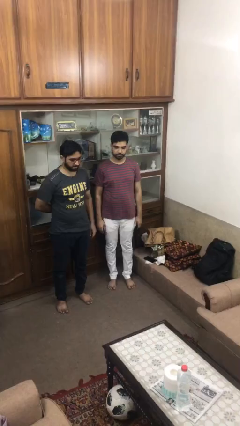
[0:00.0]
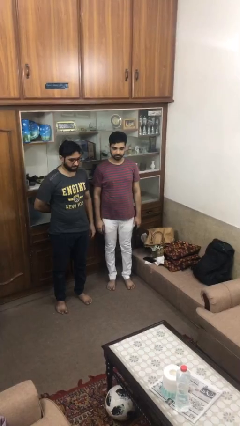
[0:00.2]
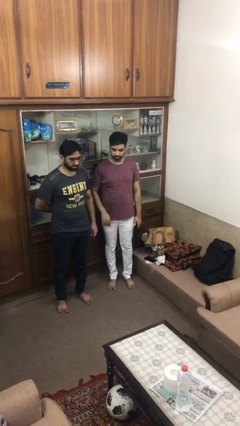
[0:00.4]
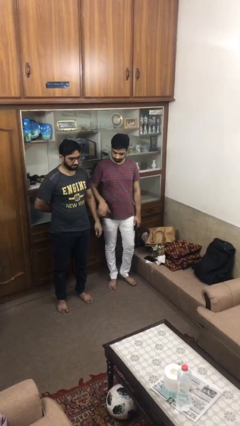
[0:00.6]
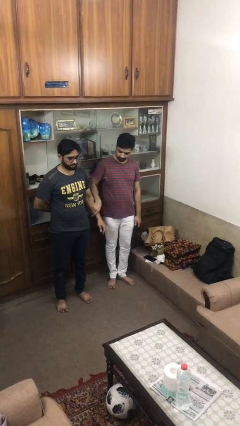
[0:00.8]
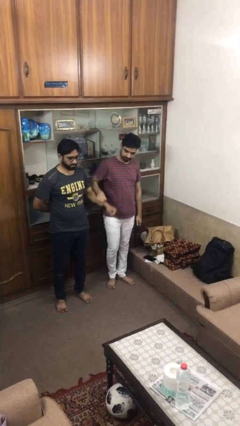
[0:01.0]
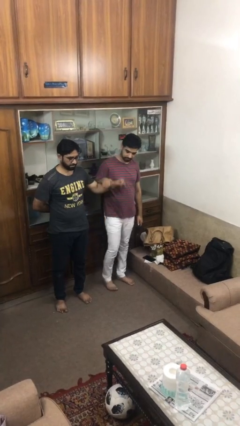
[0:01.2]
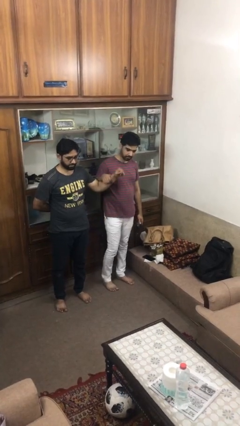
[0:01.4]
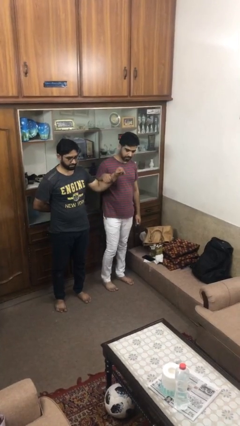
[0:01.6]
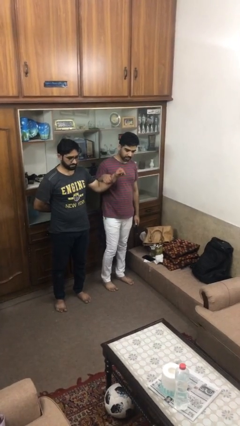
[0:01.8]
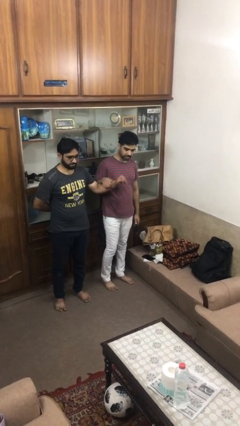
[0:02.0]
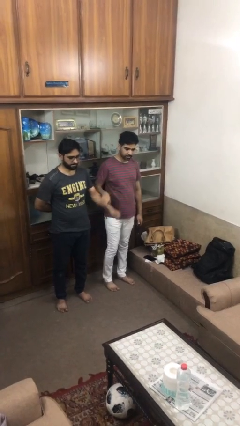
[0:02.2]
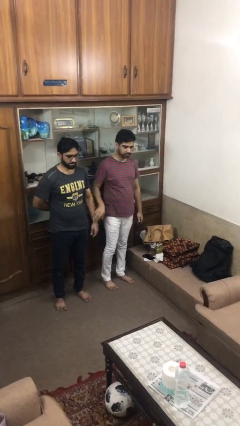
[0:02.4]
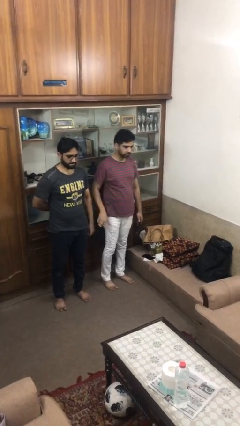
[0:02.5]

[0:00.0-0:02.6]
person grabs person by forearm

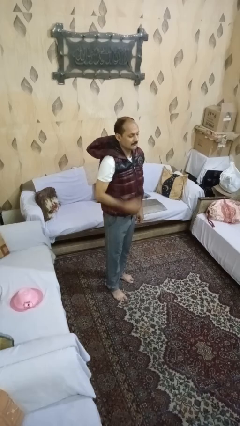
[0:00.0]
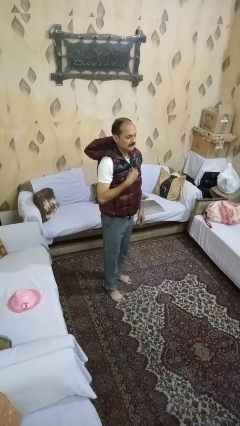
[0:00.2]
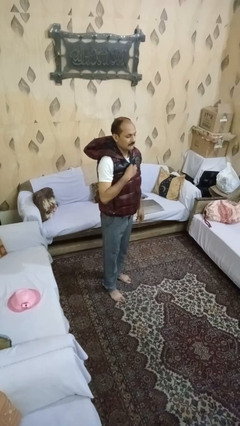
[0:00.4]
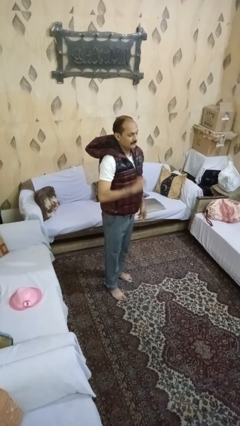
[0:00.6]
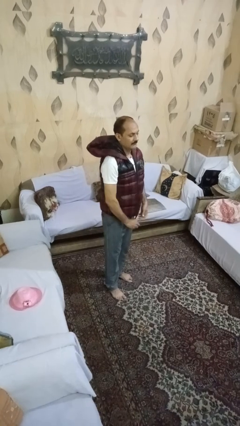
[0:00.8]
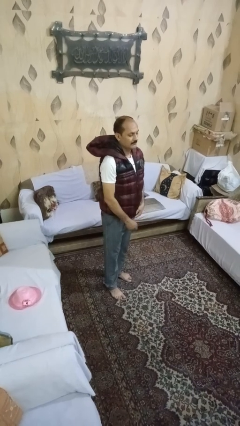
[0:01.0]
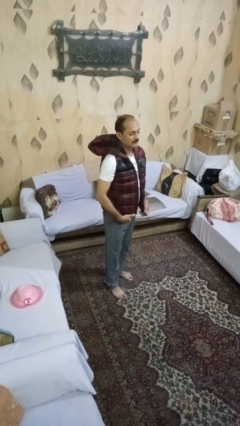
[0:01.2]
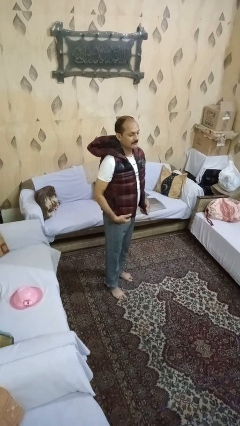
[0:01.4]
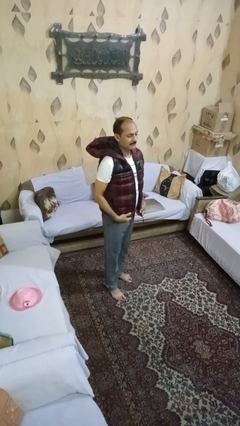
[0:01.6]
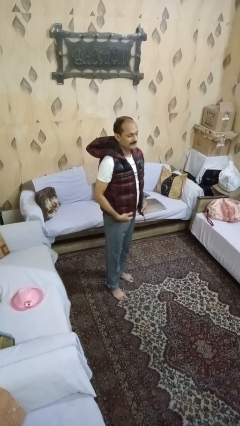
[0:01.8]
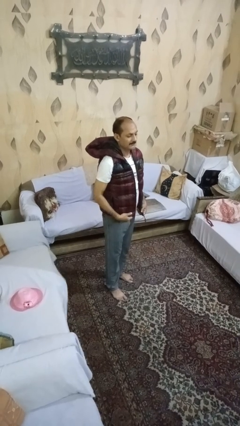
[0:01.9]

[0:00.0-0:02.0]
person unzips jacket

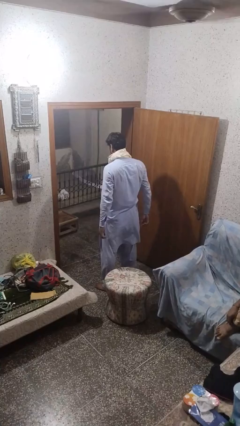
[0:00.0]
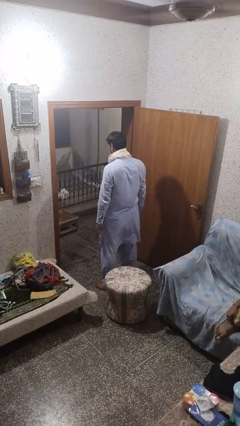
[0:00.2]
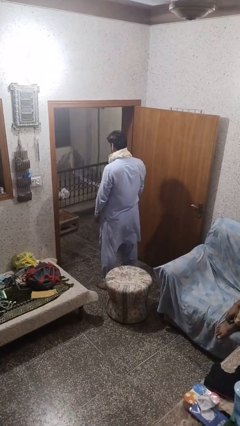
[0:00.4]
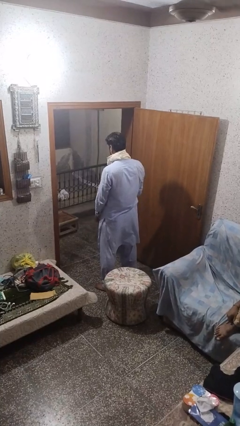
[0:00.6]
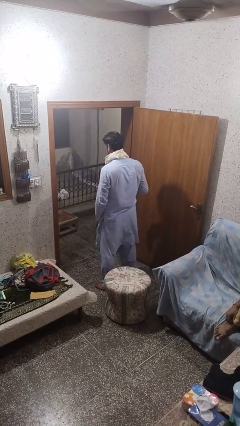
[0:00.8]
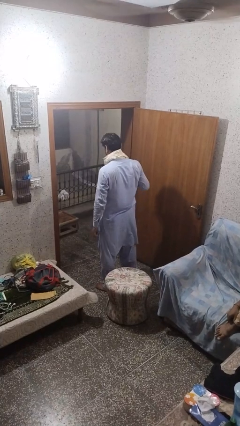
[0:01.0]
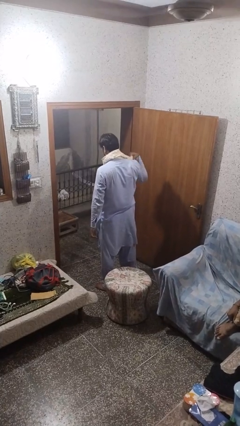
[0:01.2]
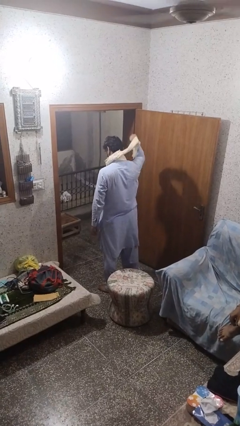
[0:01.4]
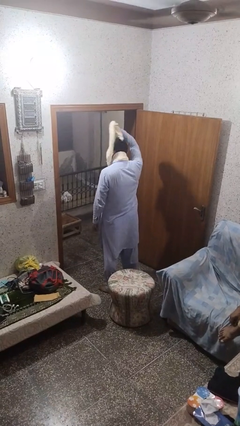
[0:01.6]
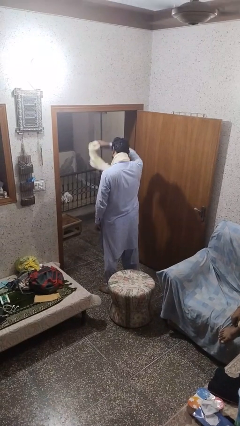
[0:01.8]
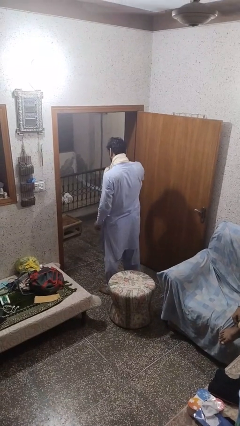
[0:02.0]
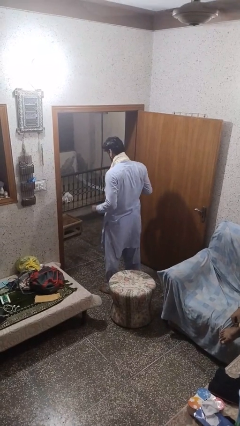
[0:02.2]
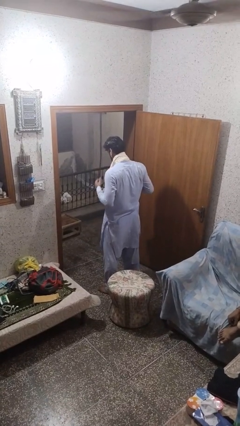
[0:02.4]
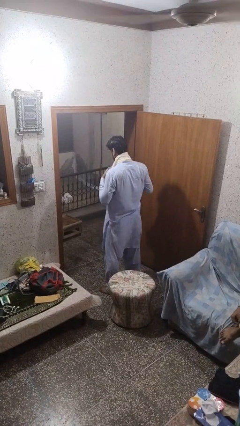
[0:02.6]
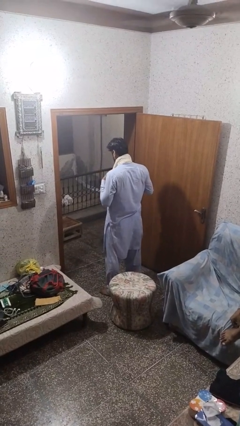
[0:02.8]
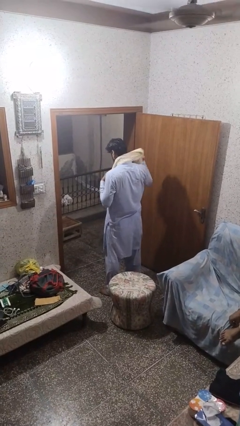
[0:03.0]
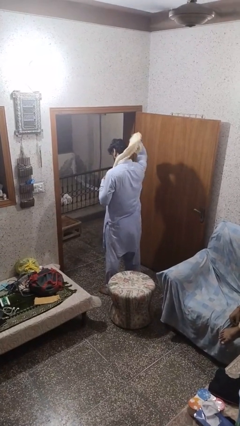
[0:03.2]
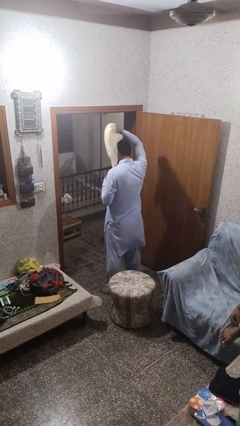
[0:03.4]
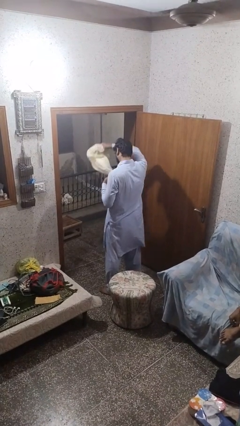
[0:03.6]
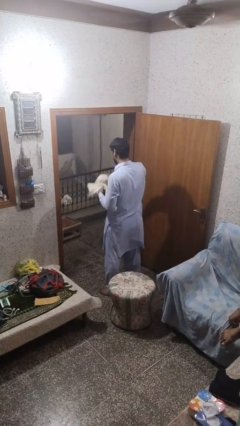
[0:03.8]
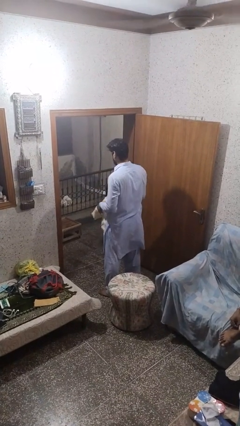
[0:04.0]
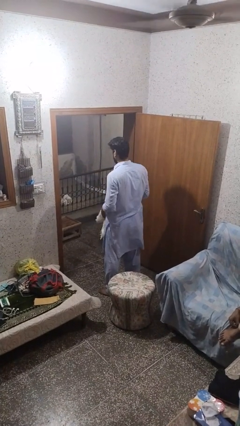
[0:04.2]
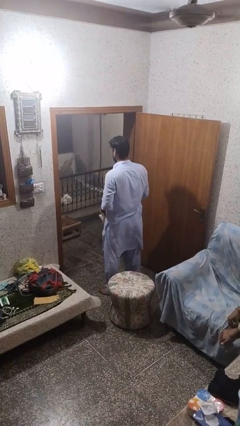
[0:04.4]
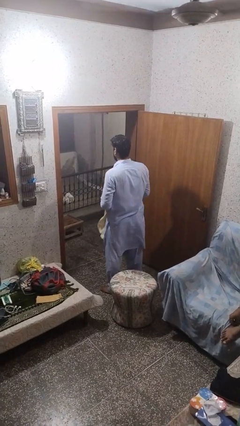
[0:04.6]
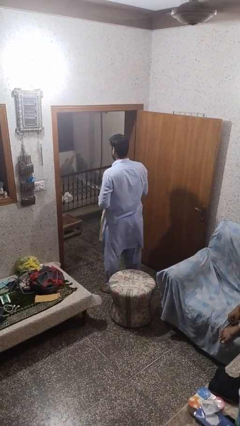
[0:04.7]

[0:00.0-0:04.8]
person takes off scarf

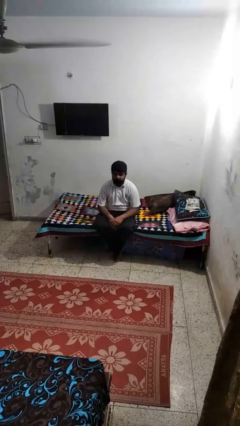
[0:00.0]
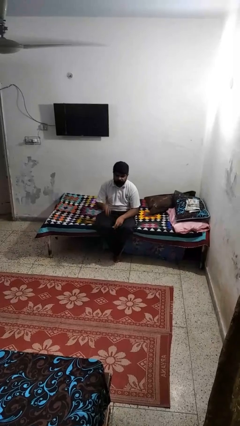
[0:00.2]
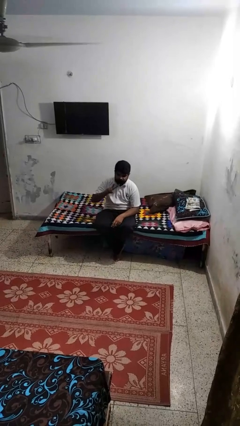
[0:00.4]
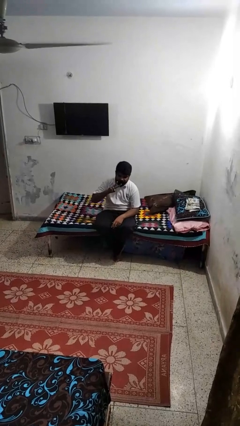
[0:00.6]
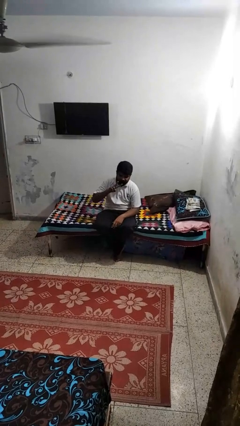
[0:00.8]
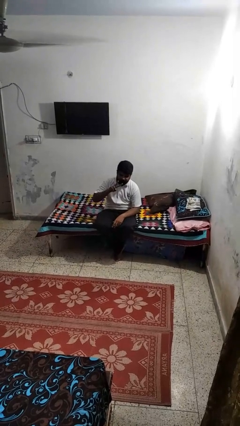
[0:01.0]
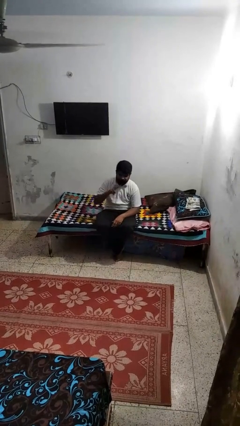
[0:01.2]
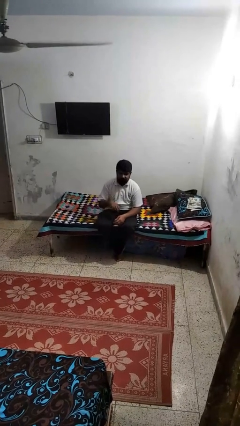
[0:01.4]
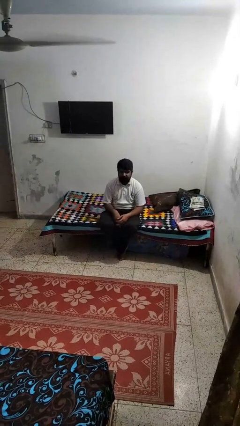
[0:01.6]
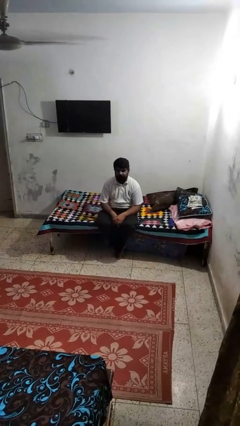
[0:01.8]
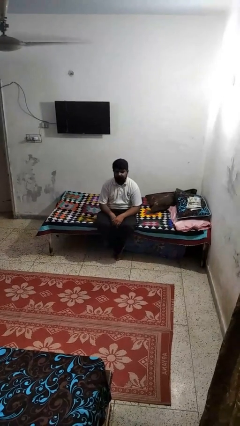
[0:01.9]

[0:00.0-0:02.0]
person gestures peace

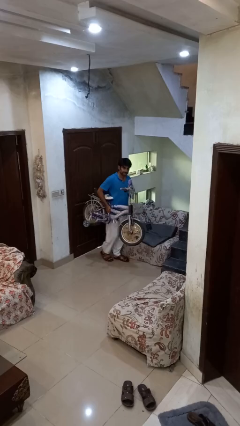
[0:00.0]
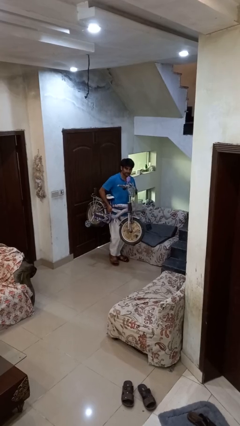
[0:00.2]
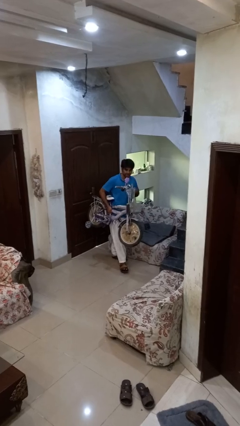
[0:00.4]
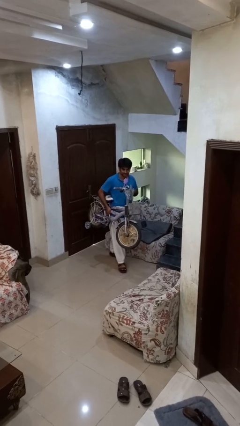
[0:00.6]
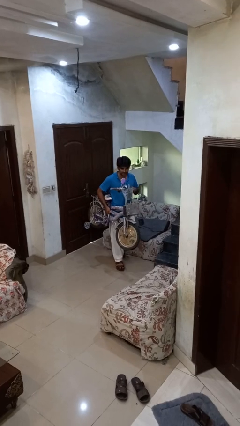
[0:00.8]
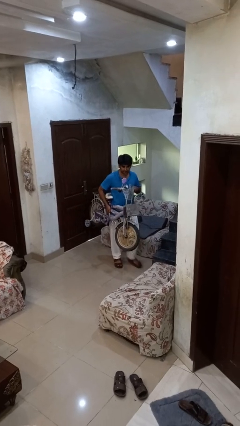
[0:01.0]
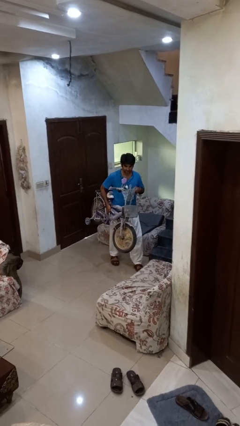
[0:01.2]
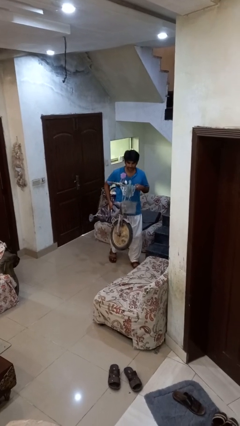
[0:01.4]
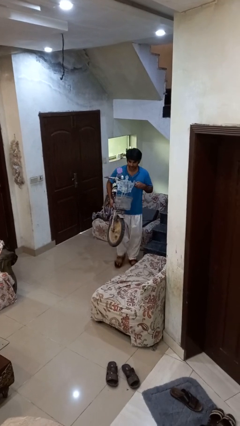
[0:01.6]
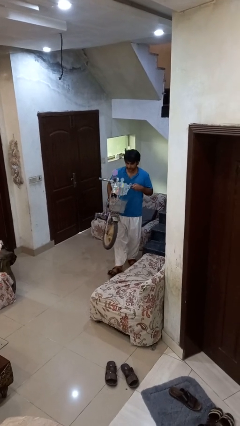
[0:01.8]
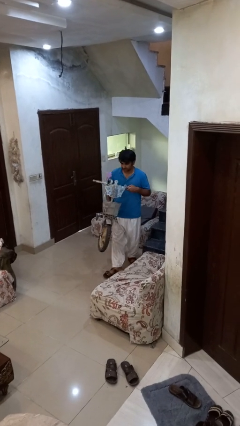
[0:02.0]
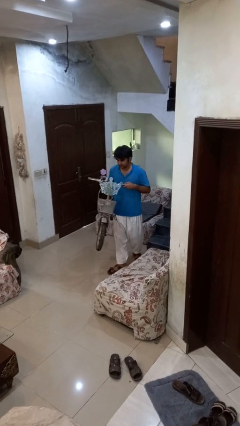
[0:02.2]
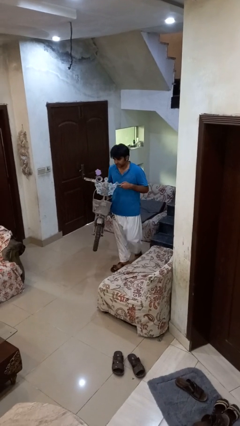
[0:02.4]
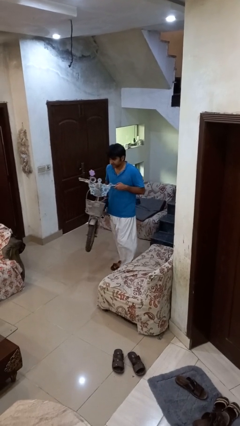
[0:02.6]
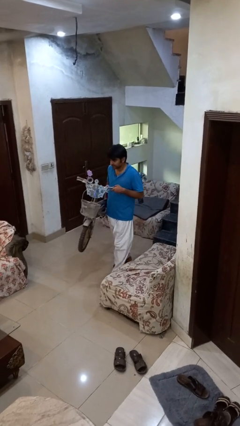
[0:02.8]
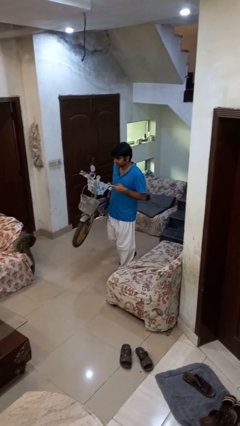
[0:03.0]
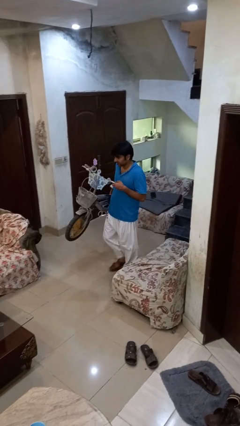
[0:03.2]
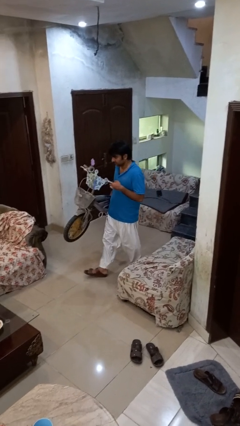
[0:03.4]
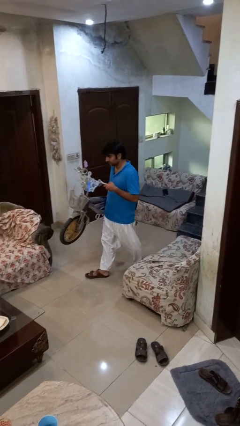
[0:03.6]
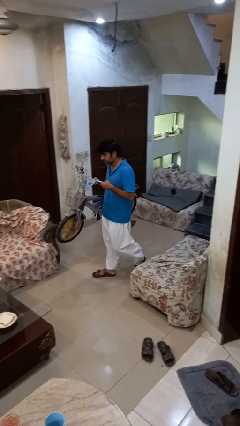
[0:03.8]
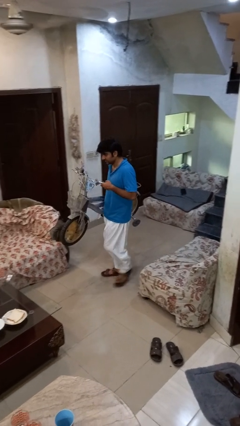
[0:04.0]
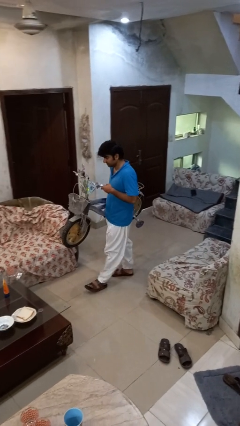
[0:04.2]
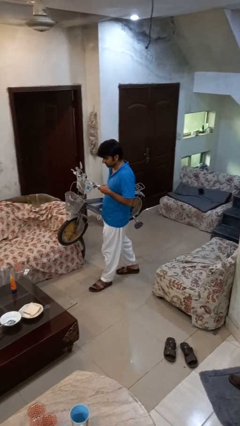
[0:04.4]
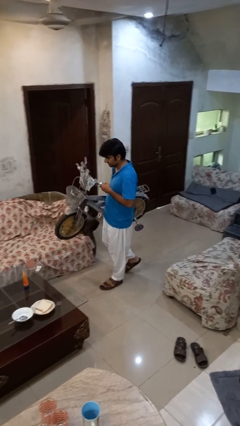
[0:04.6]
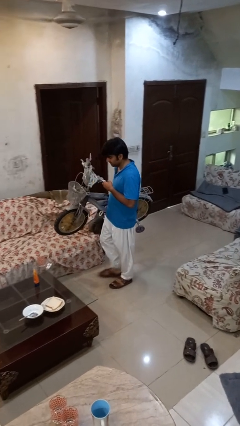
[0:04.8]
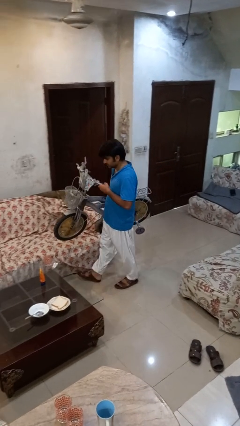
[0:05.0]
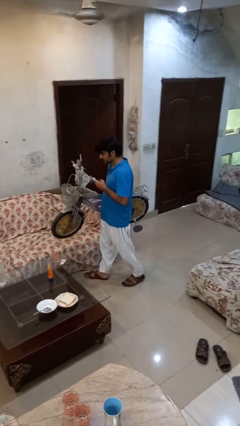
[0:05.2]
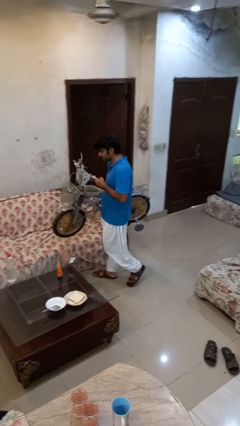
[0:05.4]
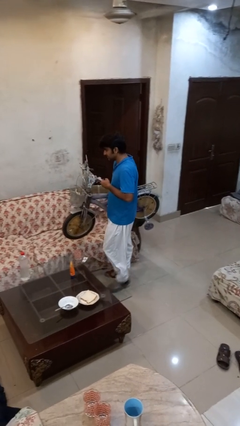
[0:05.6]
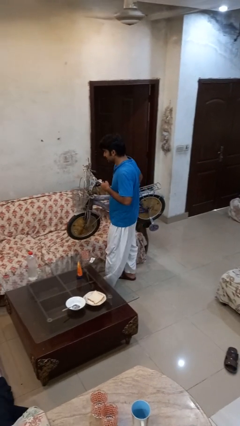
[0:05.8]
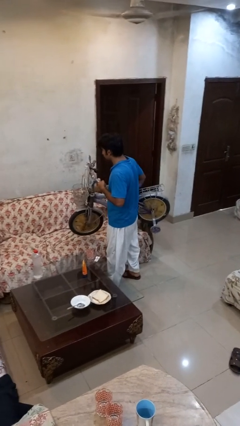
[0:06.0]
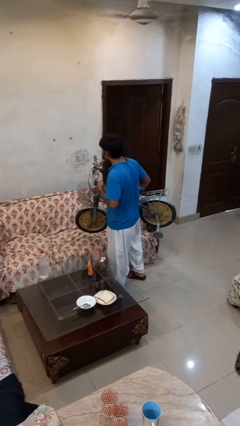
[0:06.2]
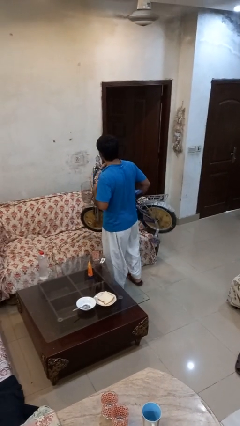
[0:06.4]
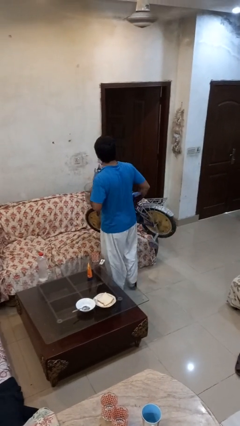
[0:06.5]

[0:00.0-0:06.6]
person carries bicycle
